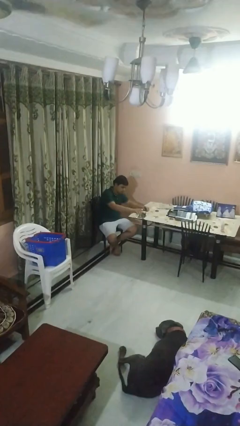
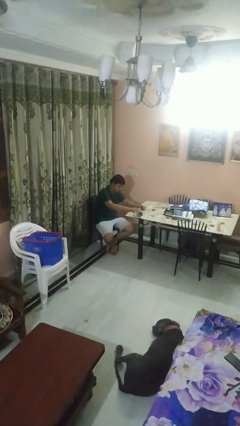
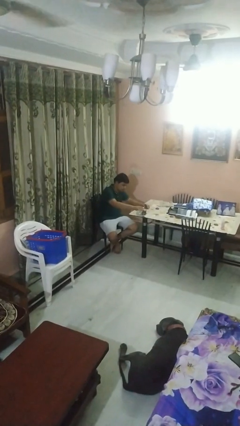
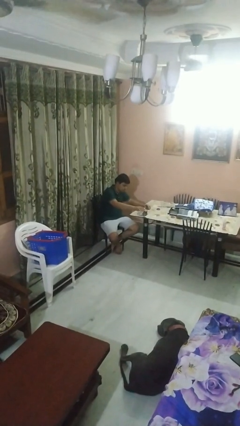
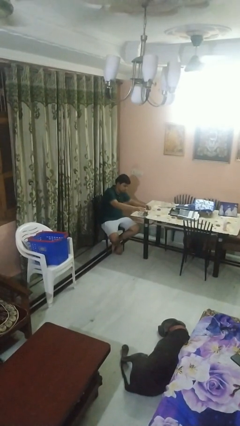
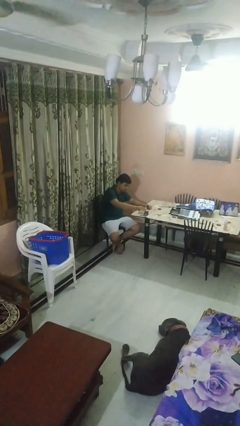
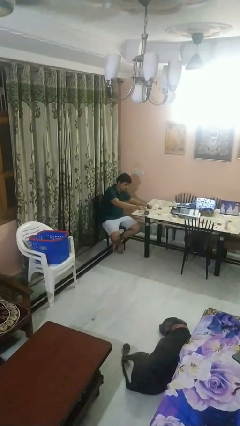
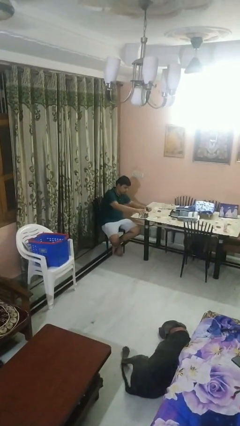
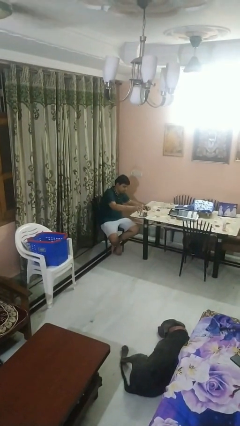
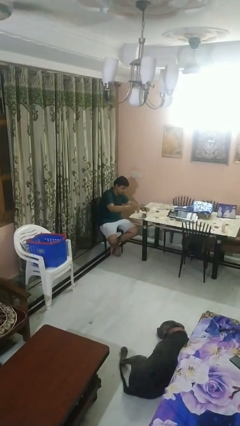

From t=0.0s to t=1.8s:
person pours liquid into cup

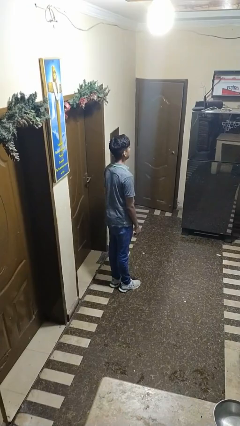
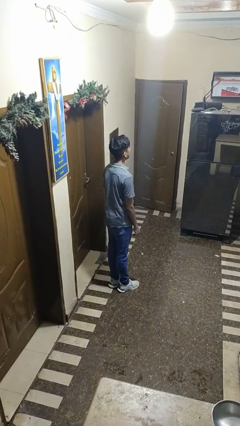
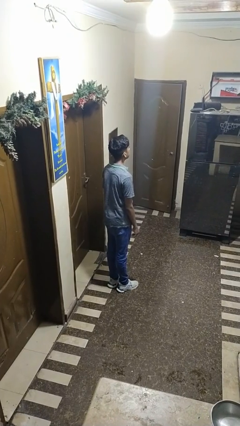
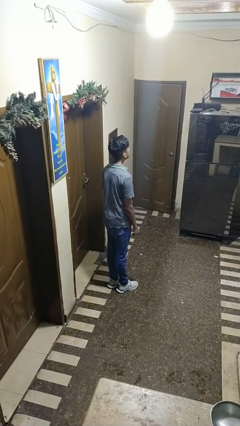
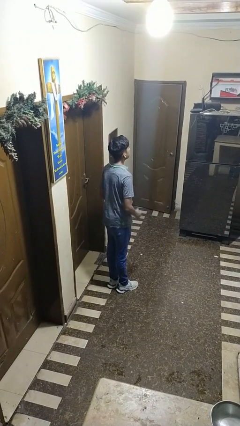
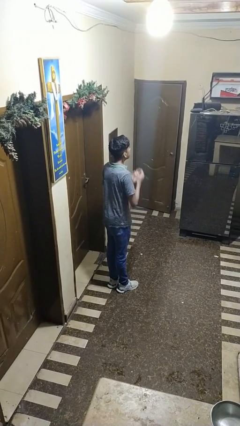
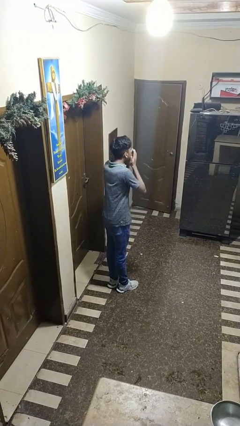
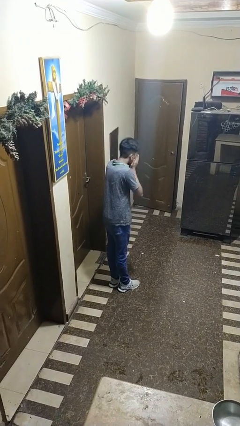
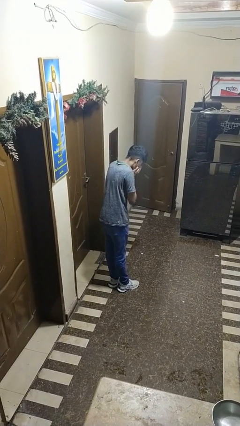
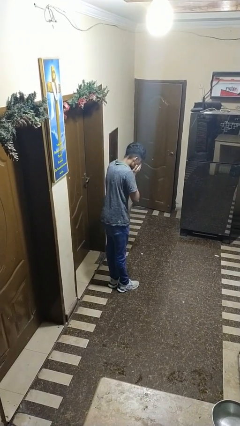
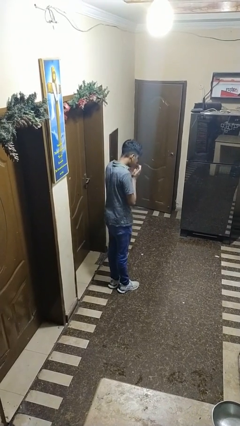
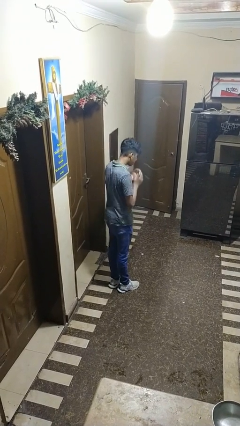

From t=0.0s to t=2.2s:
person sneezes into hand

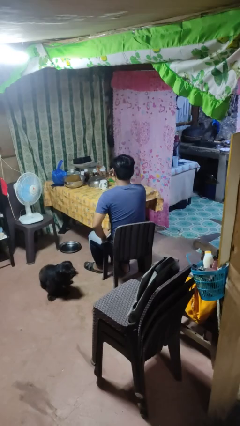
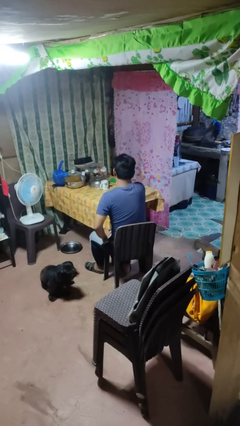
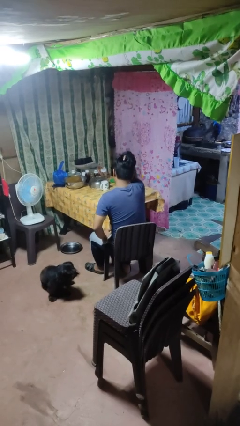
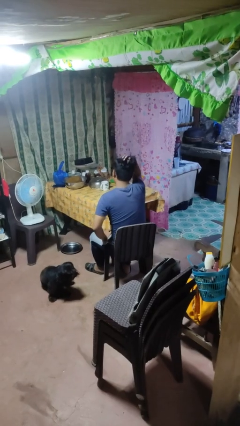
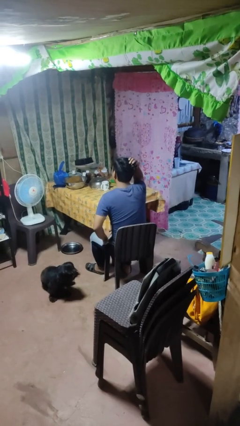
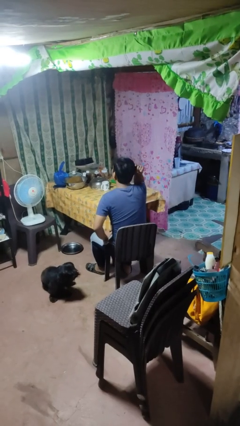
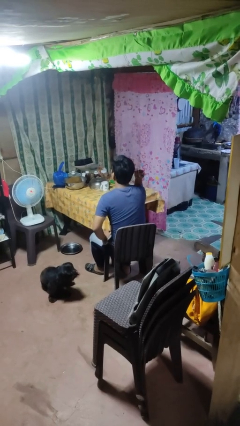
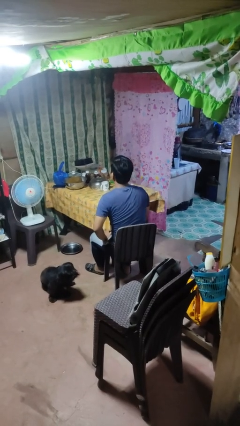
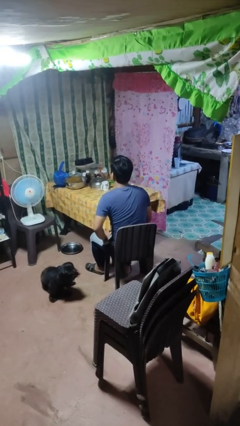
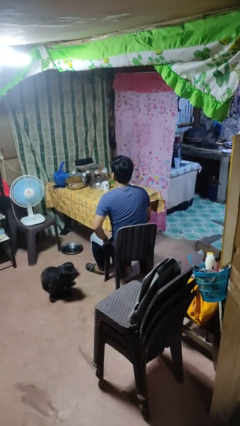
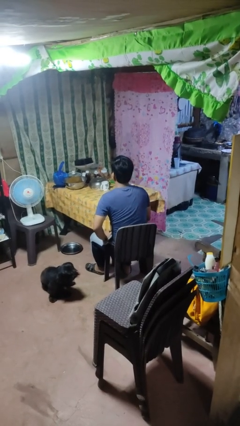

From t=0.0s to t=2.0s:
person strokes hair

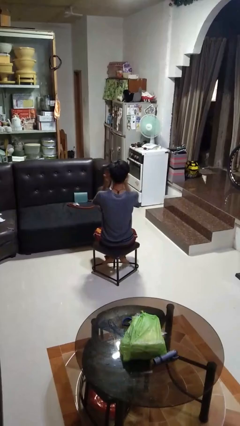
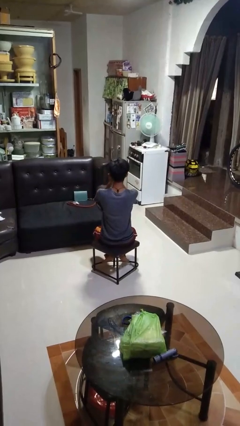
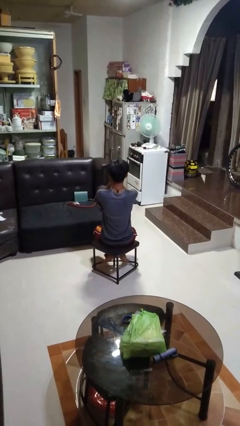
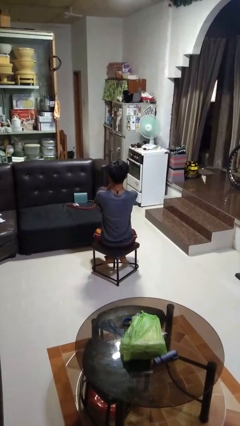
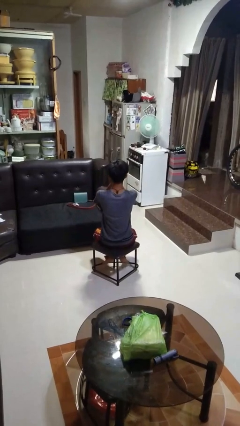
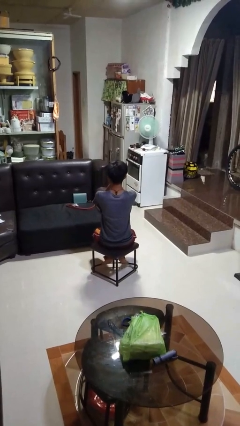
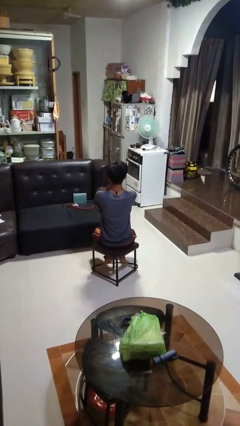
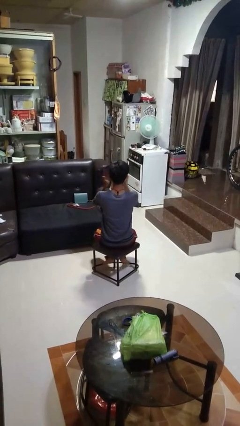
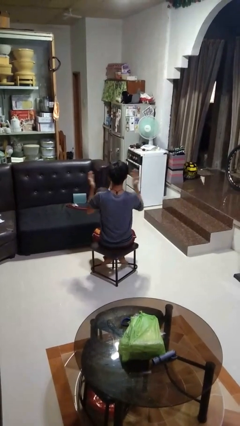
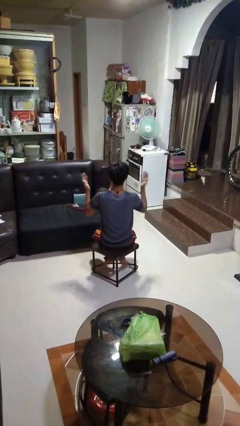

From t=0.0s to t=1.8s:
person covers face with hands

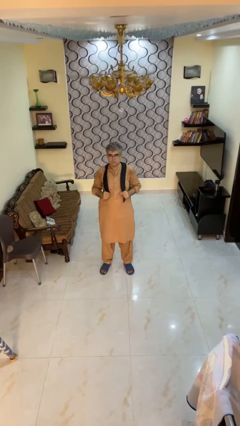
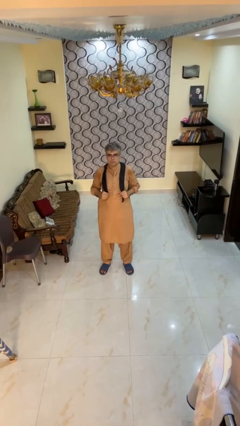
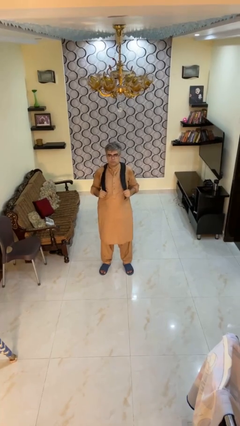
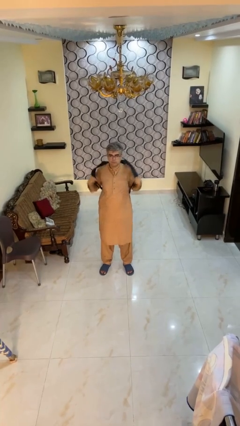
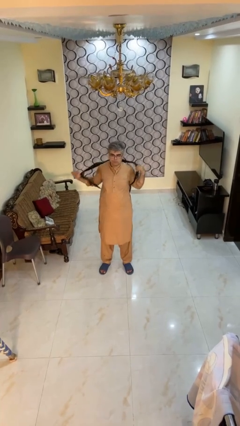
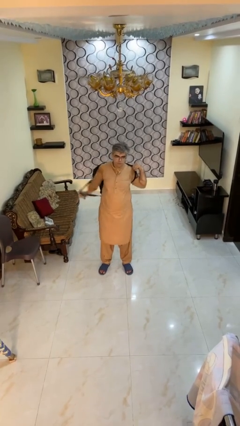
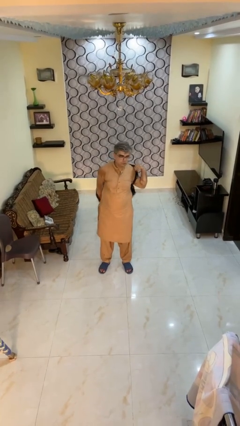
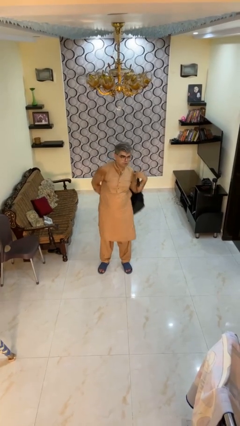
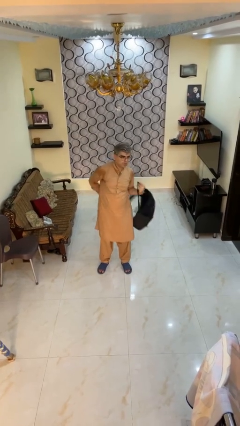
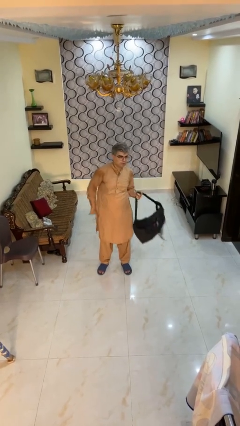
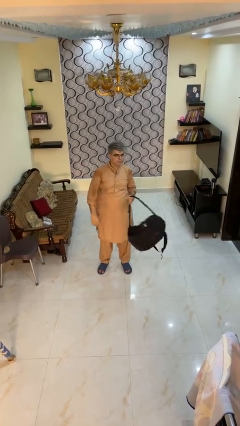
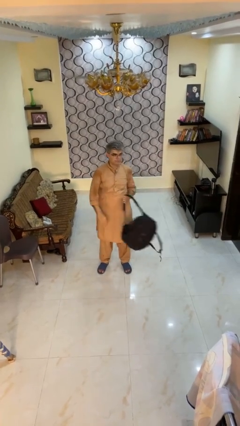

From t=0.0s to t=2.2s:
person takes off backpack

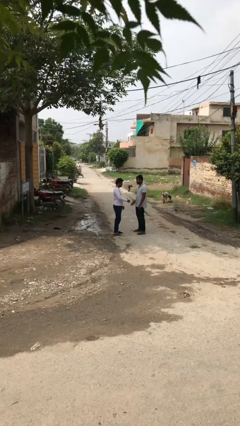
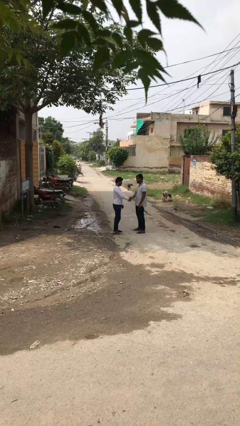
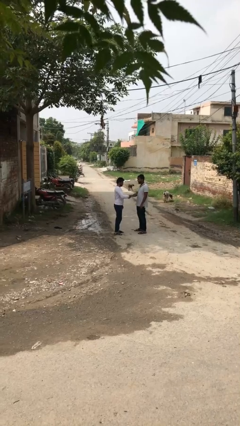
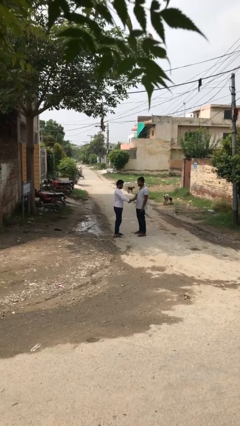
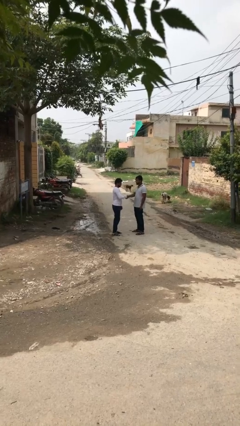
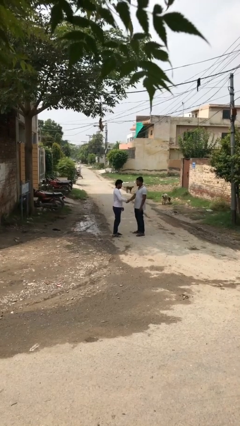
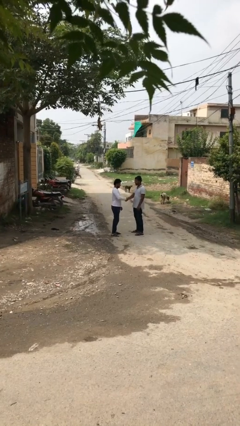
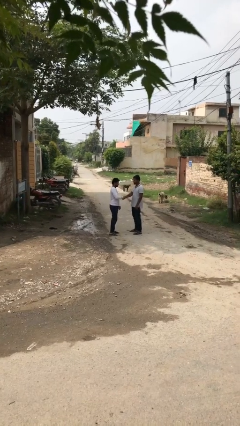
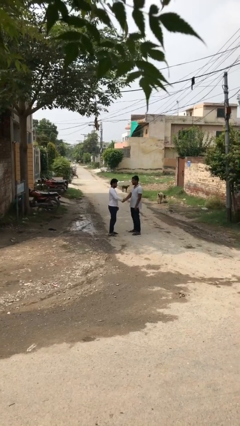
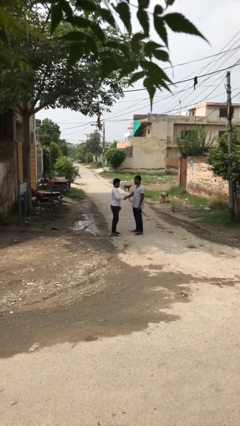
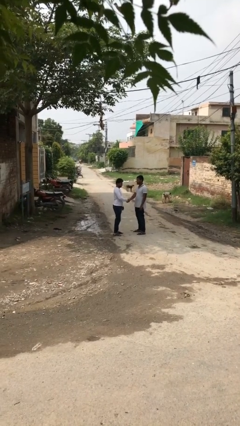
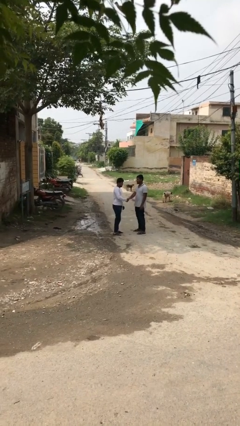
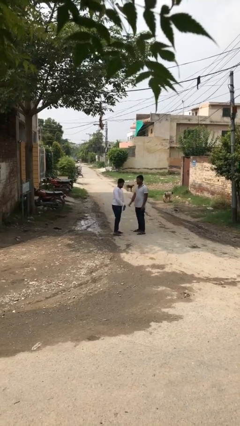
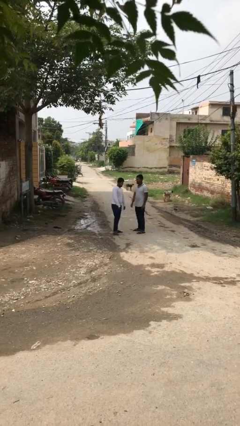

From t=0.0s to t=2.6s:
person shakes hand

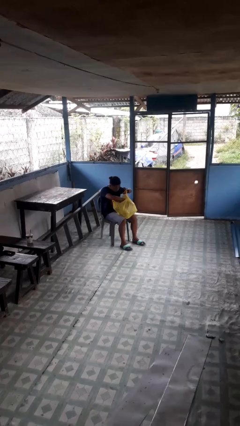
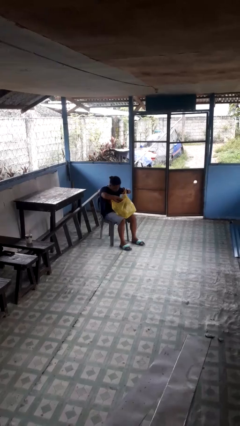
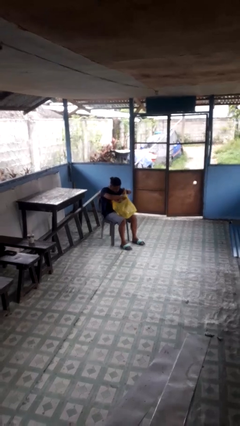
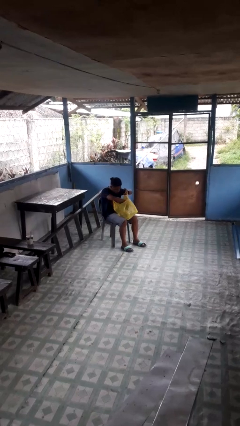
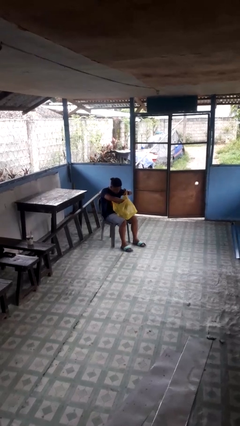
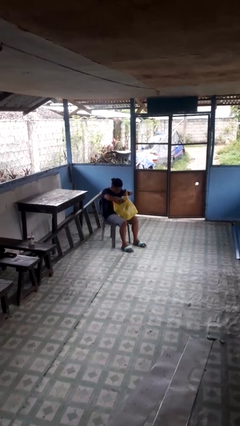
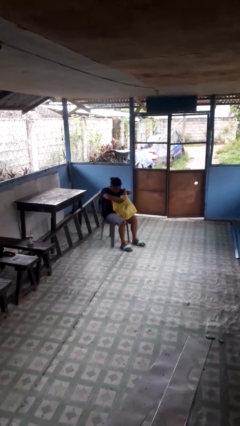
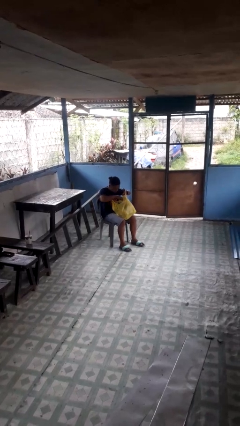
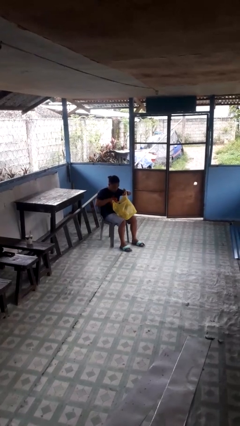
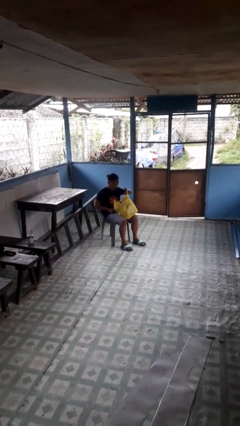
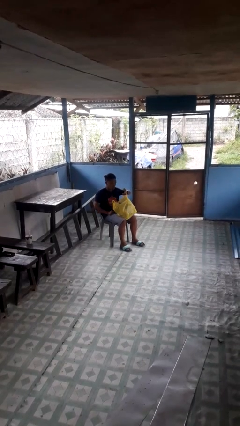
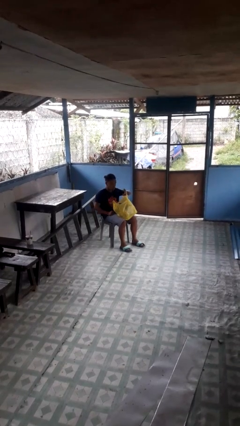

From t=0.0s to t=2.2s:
person searches in bag

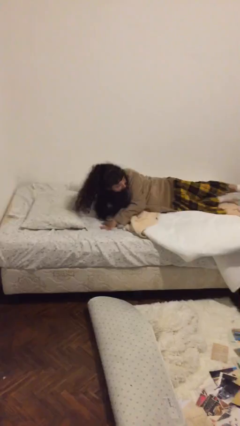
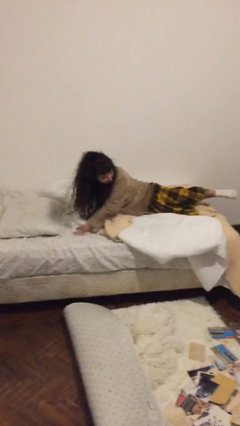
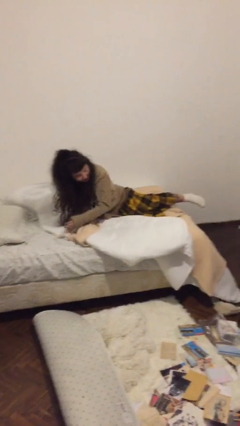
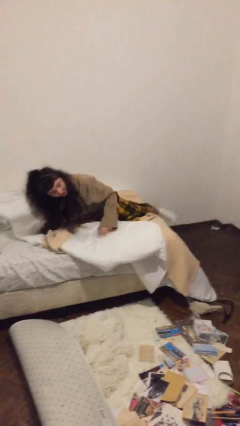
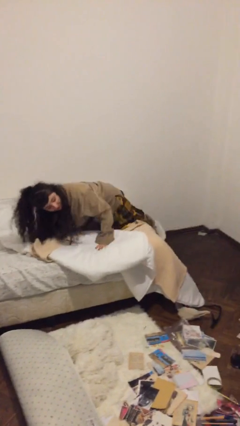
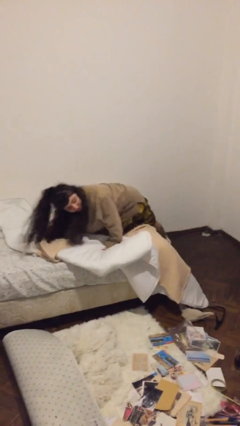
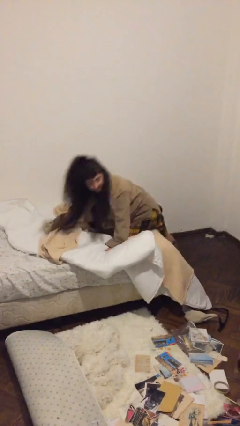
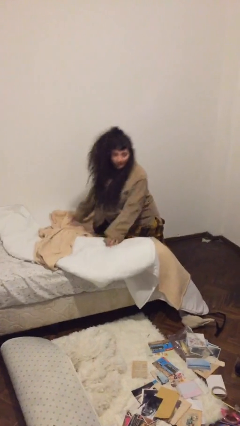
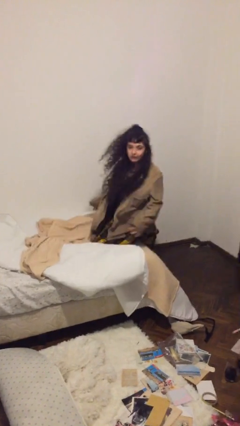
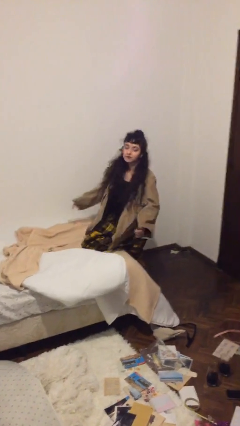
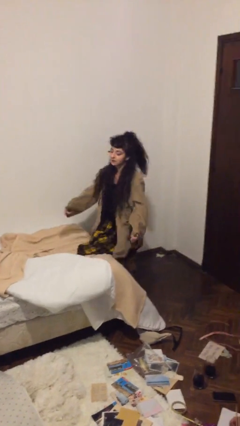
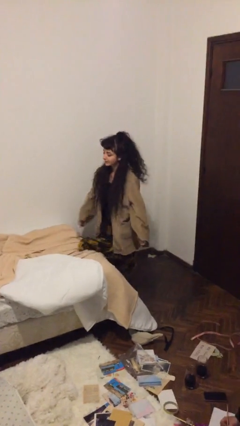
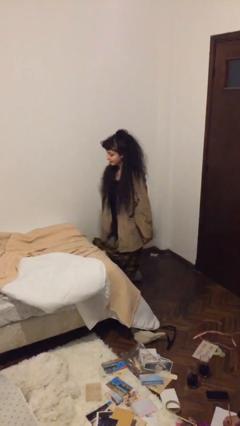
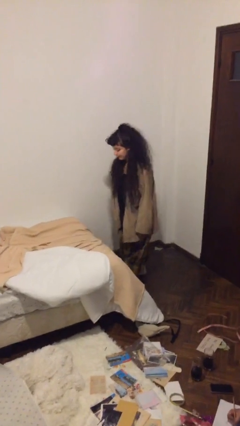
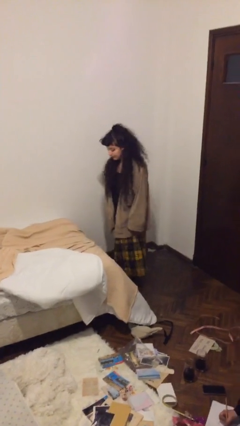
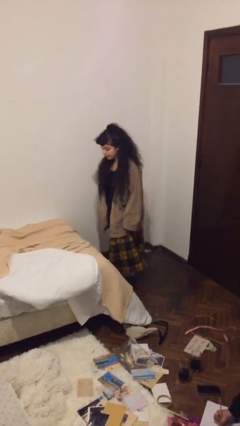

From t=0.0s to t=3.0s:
person stands up
